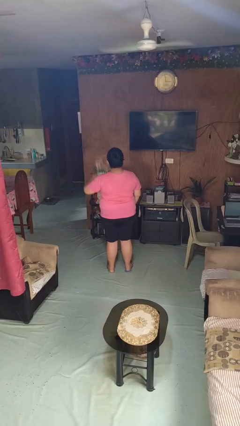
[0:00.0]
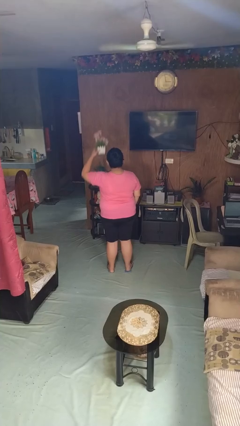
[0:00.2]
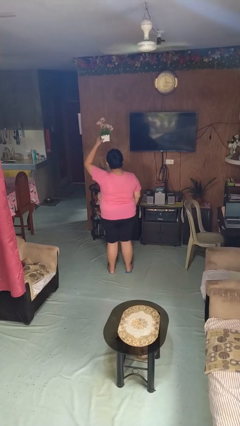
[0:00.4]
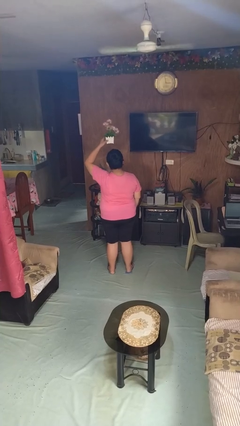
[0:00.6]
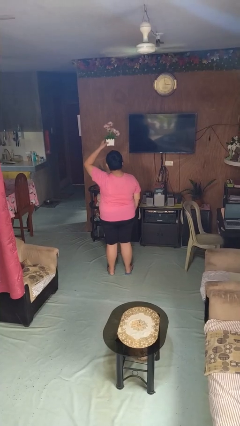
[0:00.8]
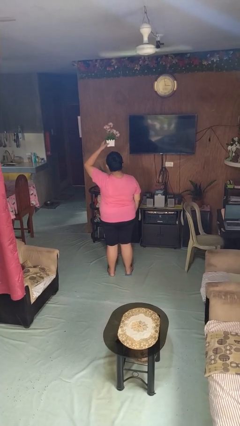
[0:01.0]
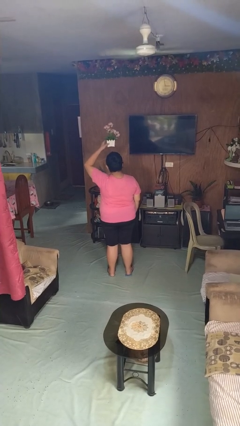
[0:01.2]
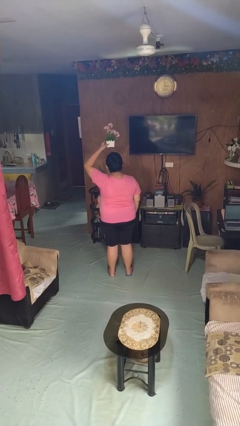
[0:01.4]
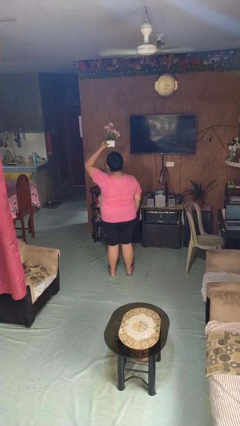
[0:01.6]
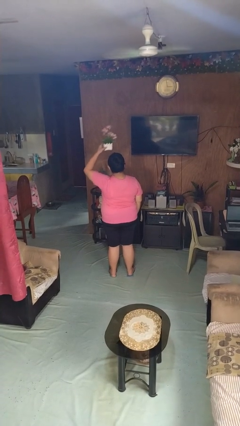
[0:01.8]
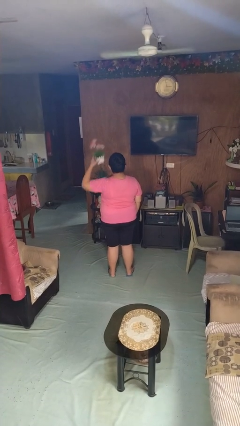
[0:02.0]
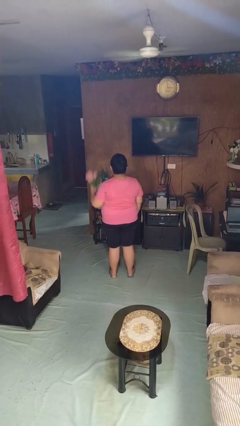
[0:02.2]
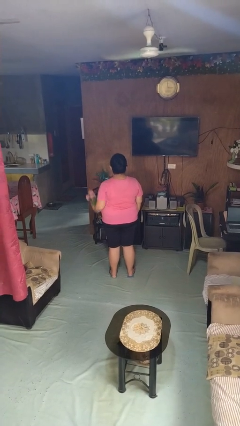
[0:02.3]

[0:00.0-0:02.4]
person holds object above head

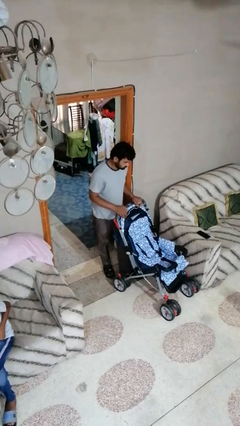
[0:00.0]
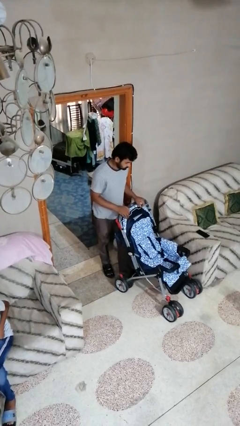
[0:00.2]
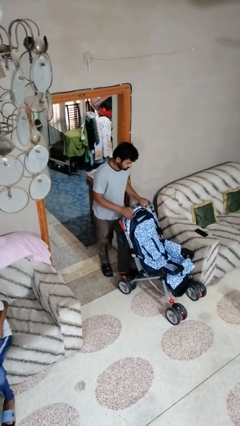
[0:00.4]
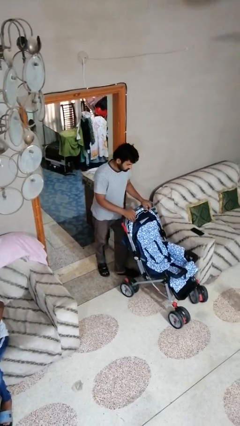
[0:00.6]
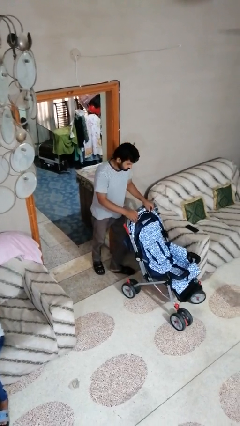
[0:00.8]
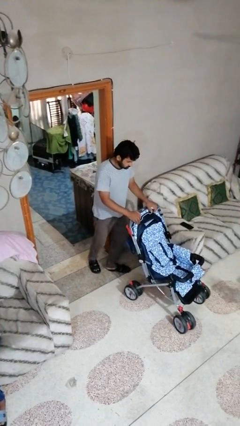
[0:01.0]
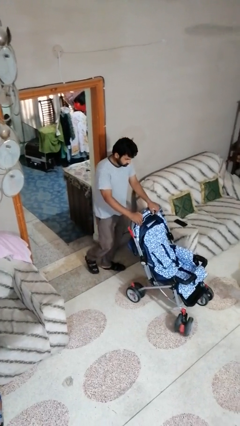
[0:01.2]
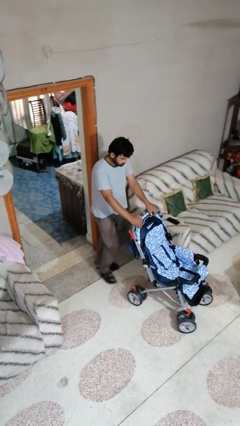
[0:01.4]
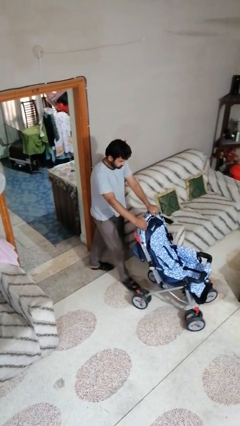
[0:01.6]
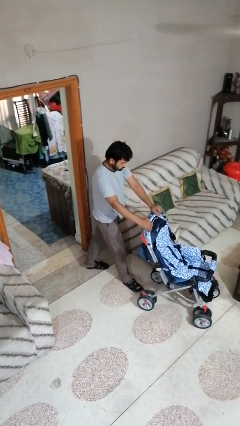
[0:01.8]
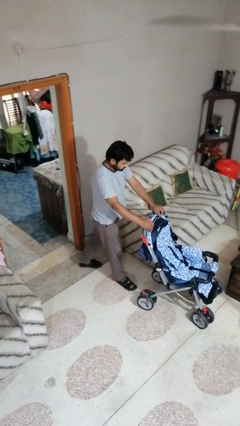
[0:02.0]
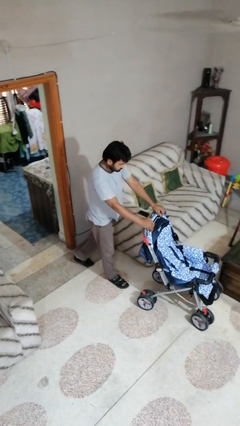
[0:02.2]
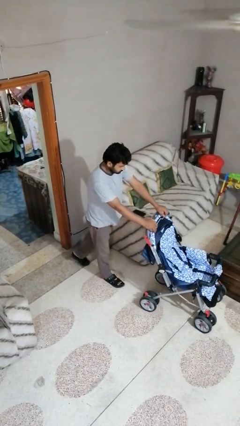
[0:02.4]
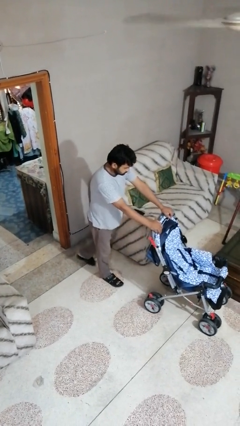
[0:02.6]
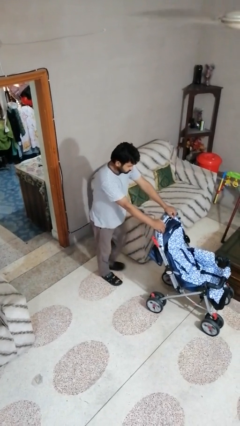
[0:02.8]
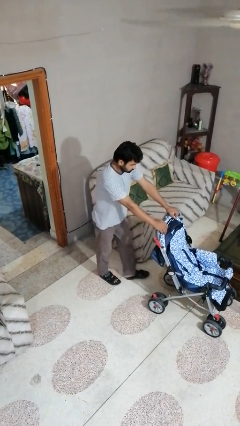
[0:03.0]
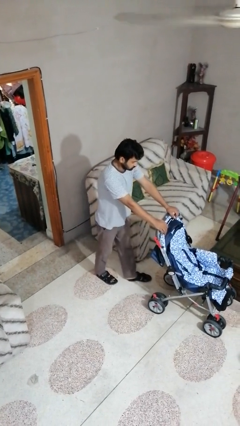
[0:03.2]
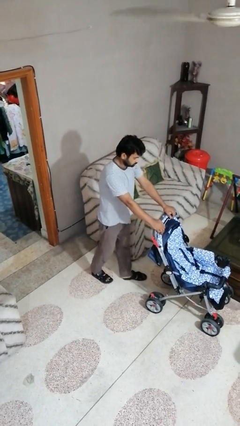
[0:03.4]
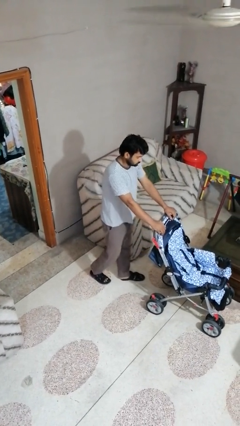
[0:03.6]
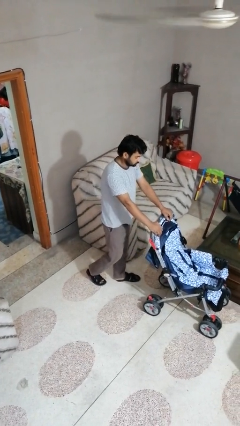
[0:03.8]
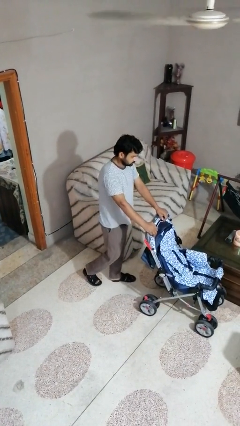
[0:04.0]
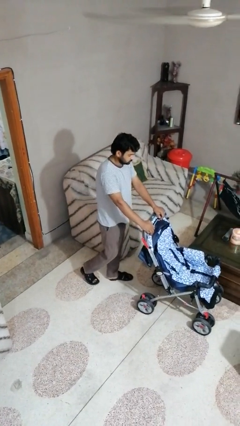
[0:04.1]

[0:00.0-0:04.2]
person pushes wheeled cart

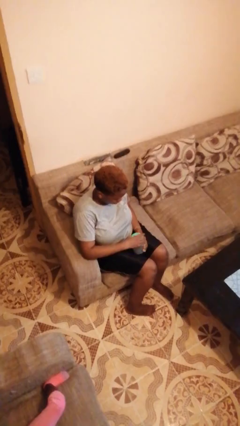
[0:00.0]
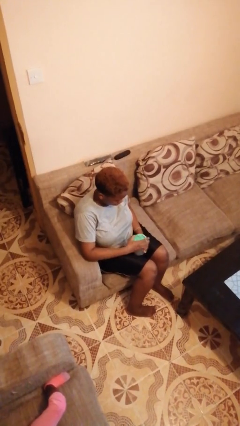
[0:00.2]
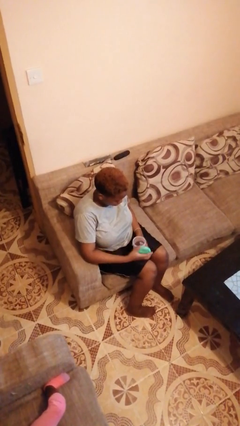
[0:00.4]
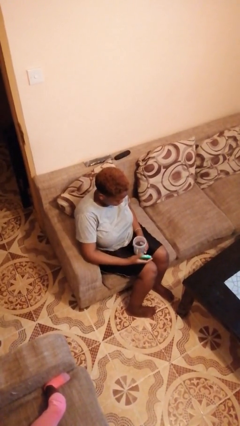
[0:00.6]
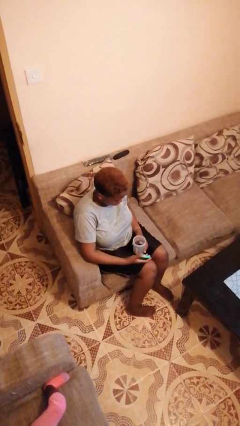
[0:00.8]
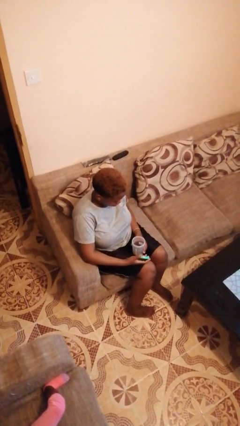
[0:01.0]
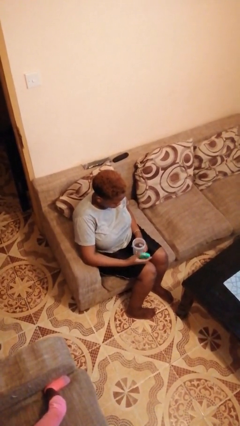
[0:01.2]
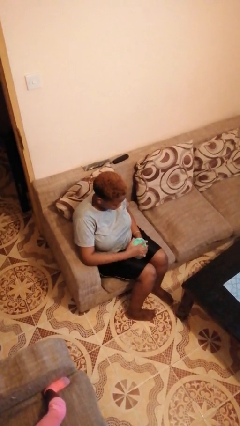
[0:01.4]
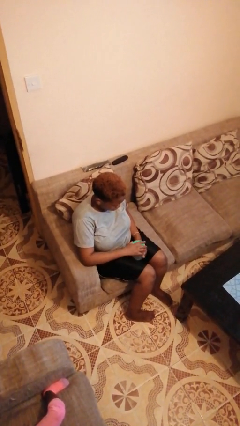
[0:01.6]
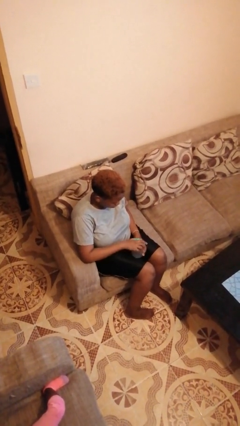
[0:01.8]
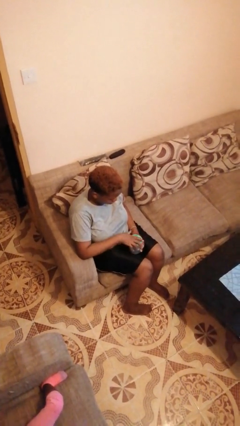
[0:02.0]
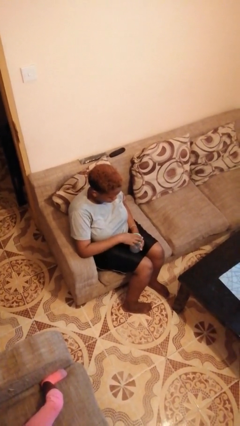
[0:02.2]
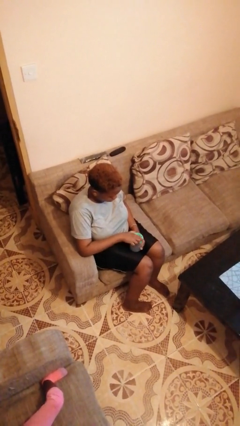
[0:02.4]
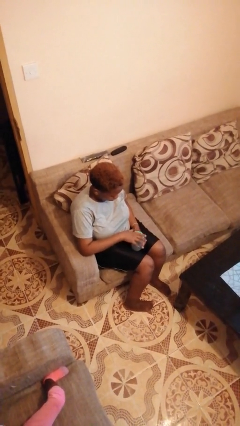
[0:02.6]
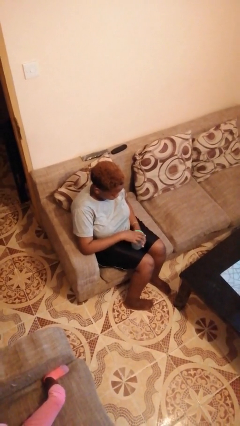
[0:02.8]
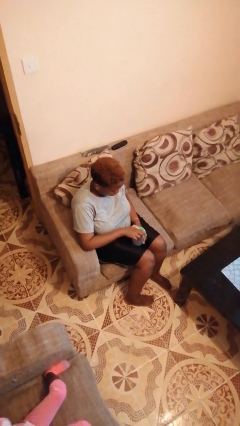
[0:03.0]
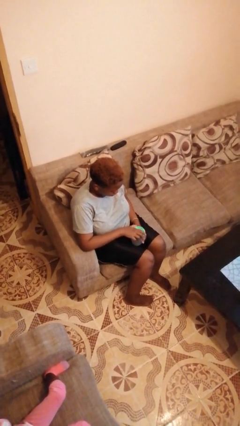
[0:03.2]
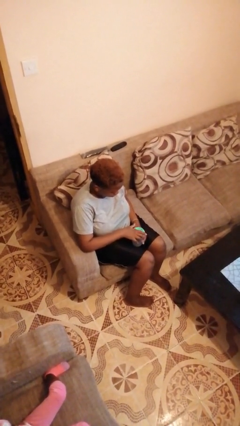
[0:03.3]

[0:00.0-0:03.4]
person closes jar

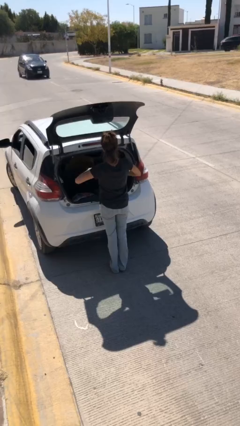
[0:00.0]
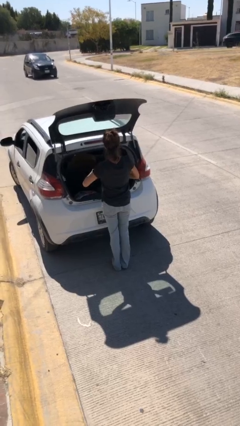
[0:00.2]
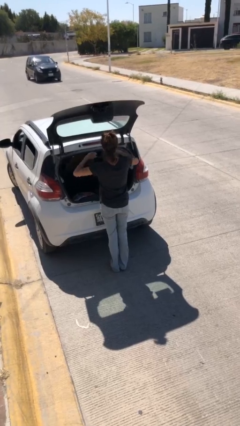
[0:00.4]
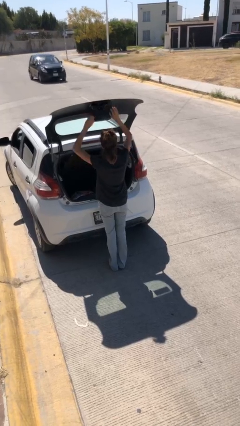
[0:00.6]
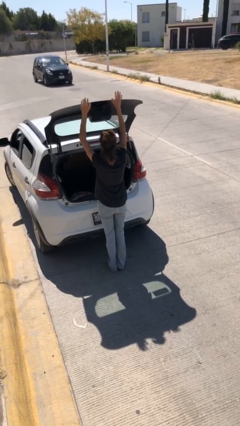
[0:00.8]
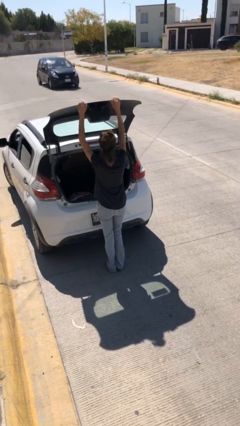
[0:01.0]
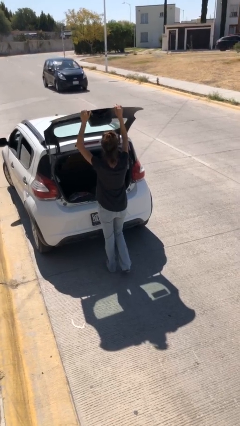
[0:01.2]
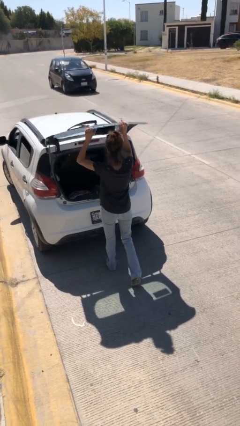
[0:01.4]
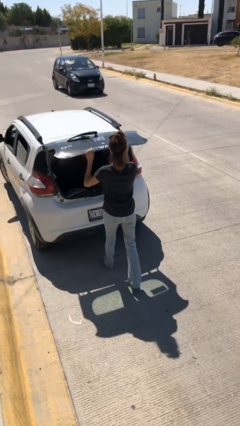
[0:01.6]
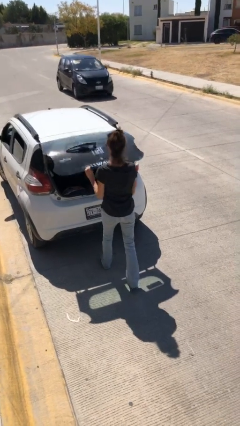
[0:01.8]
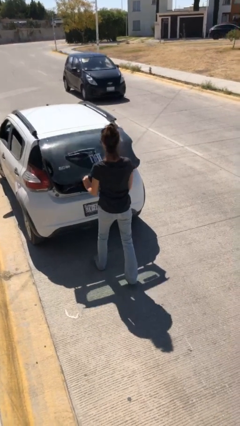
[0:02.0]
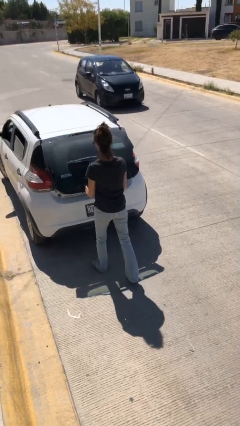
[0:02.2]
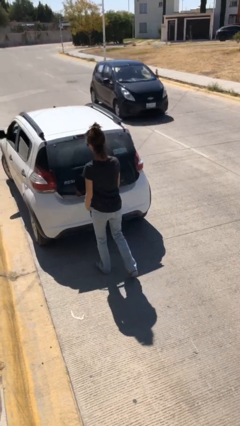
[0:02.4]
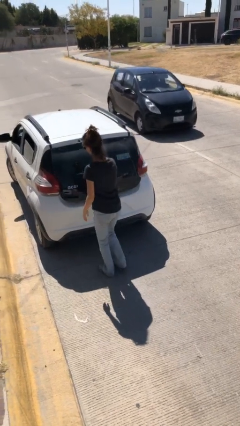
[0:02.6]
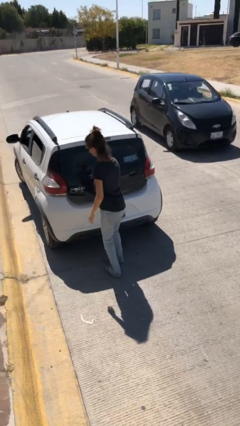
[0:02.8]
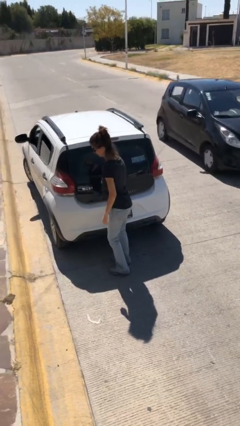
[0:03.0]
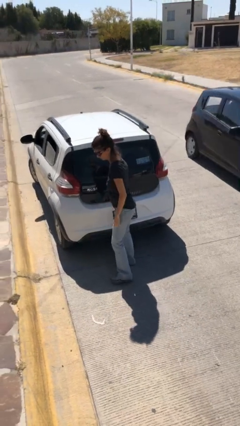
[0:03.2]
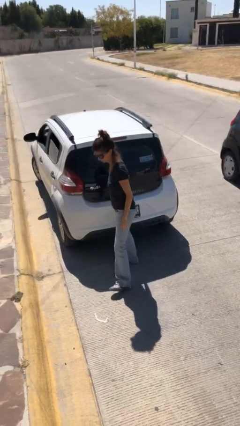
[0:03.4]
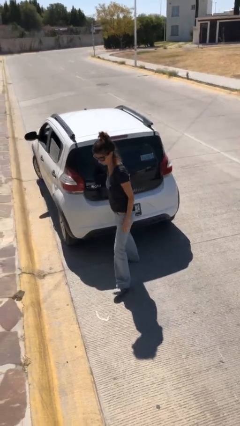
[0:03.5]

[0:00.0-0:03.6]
person closes car trunk

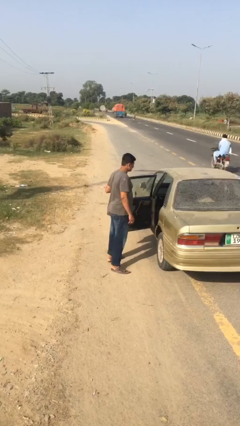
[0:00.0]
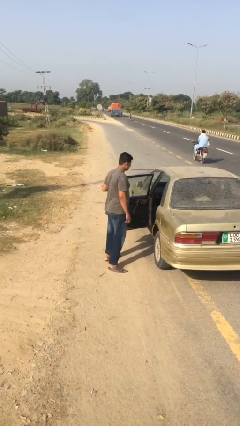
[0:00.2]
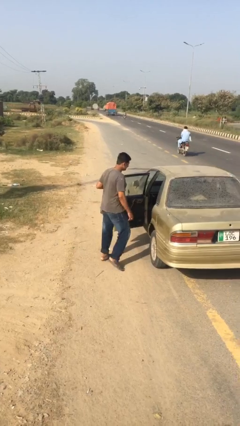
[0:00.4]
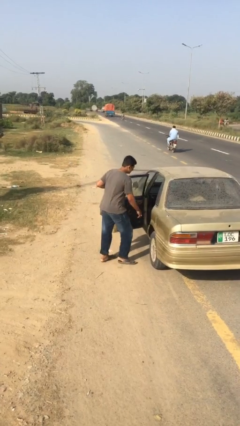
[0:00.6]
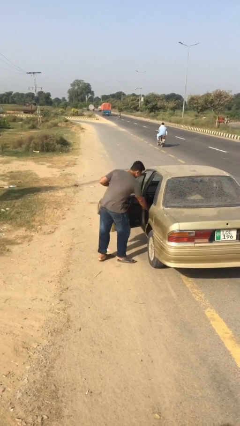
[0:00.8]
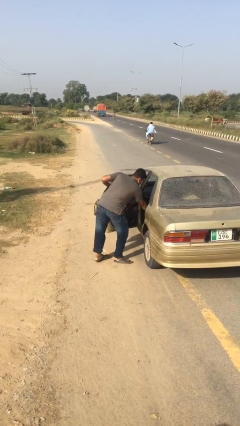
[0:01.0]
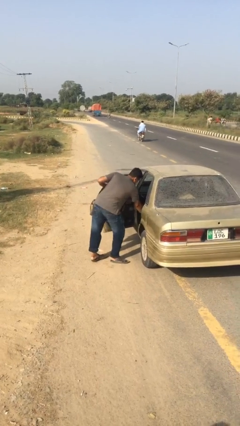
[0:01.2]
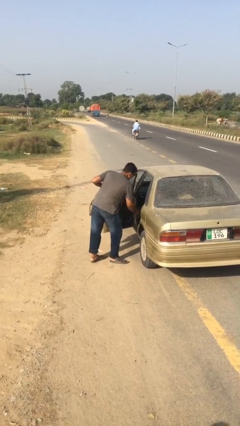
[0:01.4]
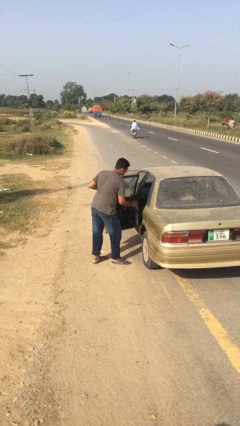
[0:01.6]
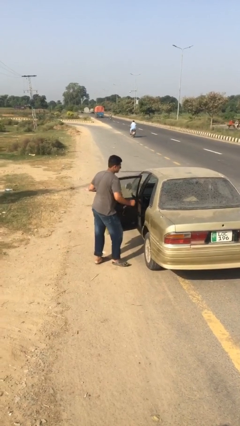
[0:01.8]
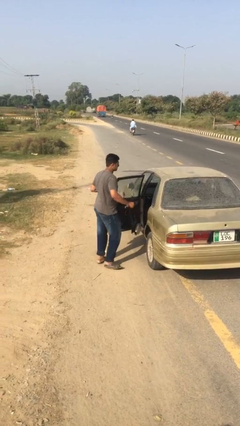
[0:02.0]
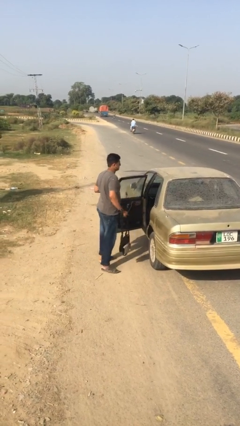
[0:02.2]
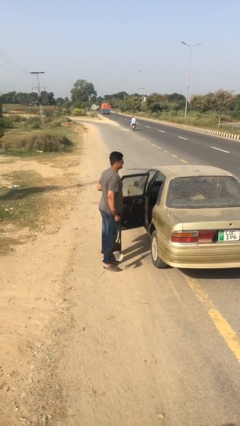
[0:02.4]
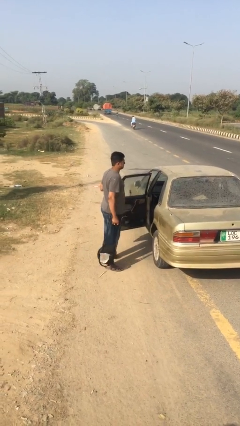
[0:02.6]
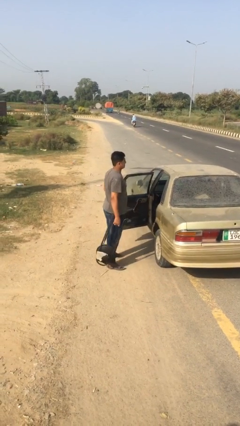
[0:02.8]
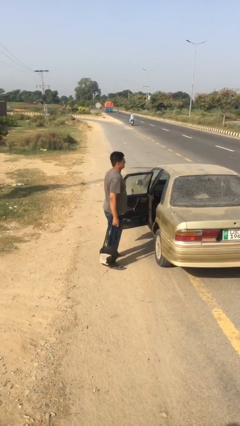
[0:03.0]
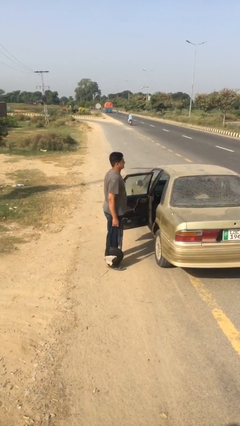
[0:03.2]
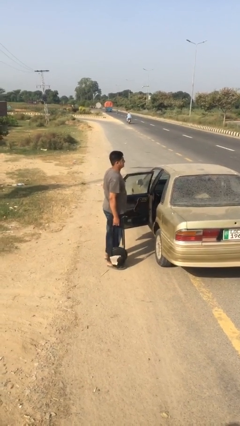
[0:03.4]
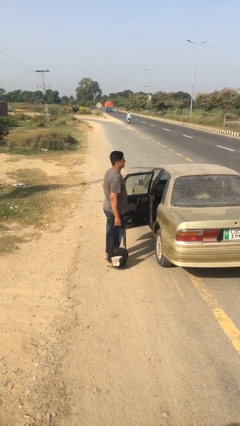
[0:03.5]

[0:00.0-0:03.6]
person unloads car

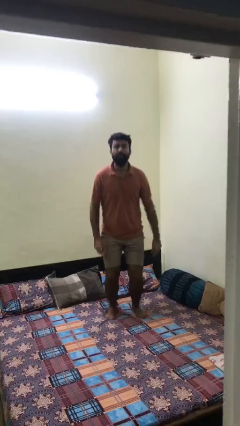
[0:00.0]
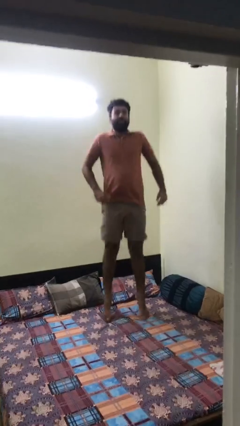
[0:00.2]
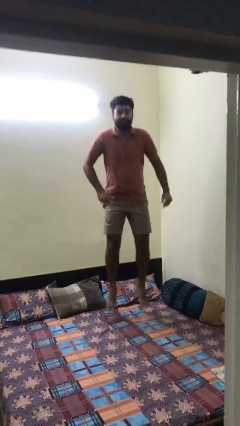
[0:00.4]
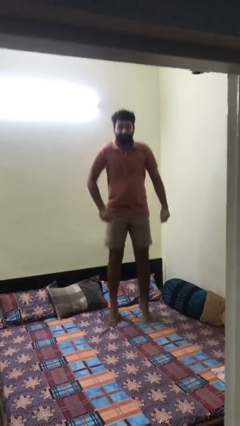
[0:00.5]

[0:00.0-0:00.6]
person jumps on bed
